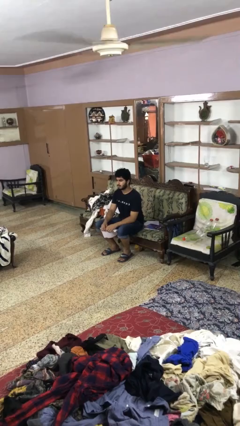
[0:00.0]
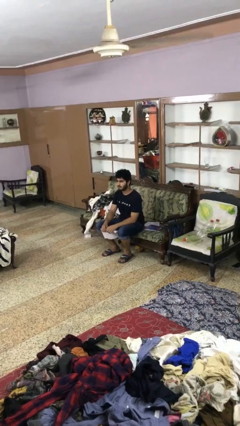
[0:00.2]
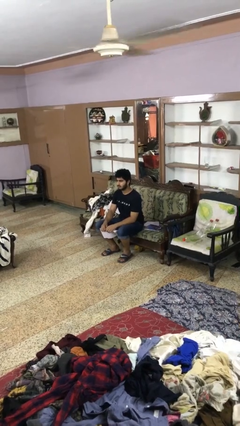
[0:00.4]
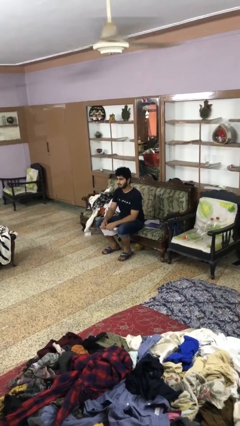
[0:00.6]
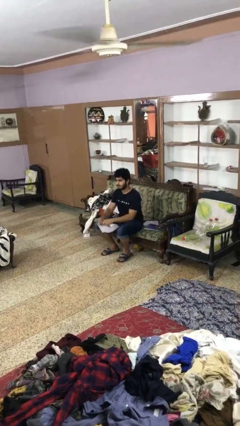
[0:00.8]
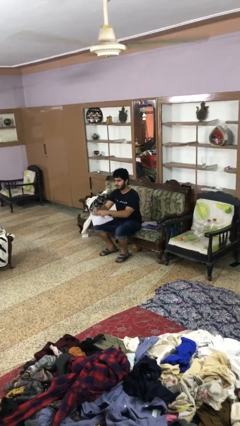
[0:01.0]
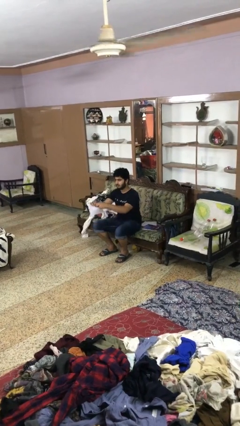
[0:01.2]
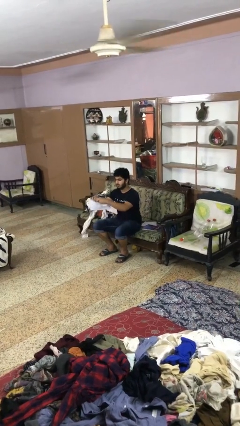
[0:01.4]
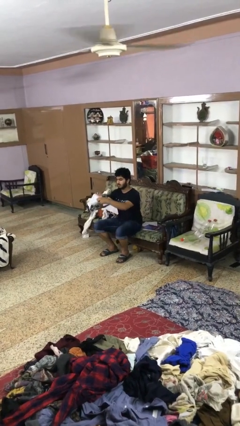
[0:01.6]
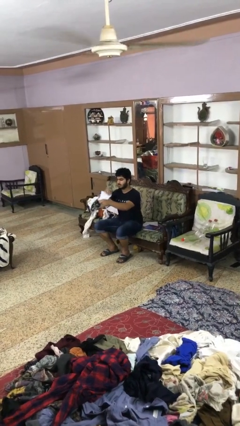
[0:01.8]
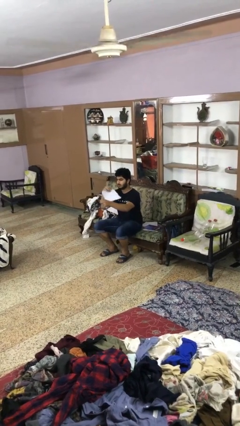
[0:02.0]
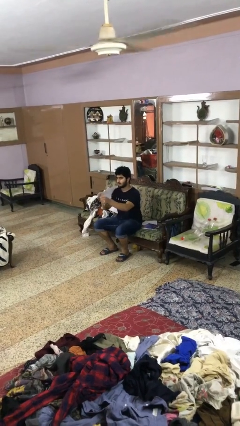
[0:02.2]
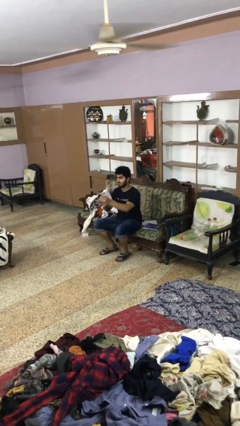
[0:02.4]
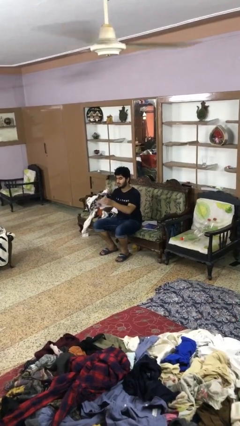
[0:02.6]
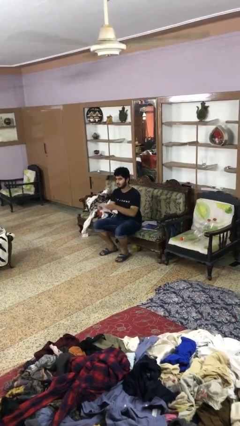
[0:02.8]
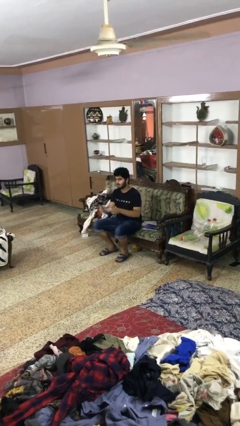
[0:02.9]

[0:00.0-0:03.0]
person tears paper

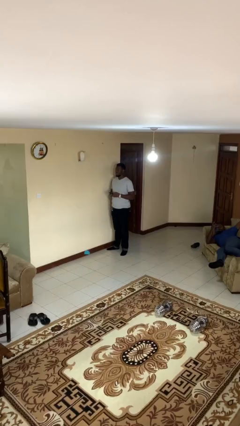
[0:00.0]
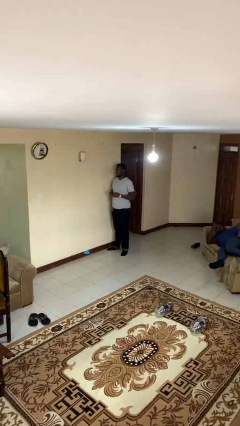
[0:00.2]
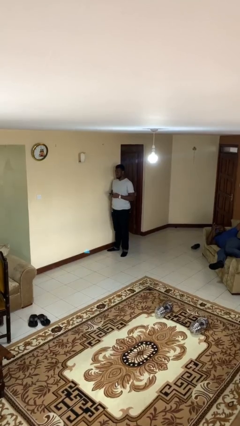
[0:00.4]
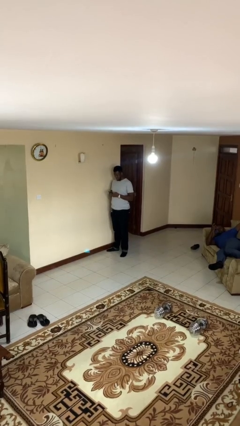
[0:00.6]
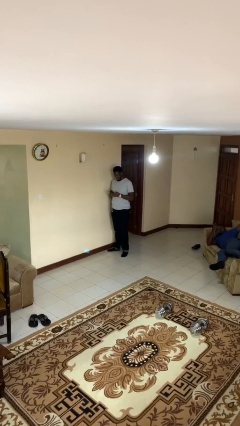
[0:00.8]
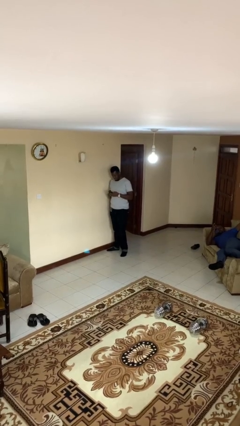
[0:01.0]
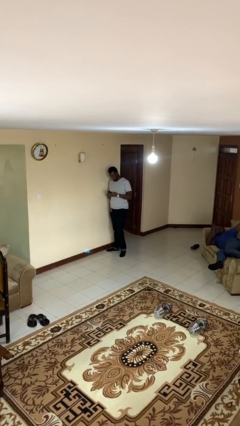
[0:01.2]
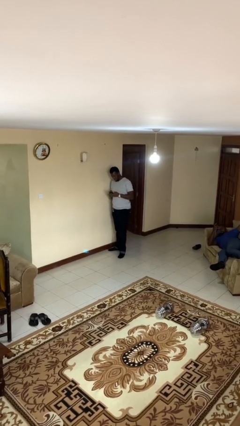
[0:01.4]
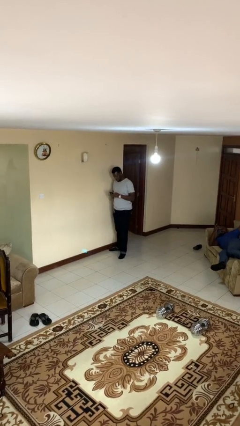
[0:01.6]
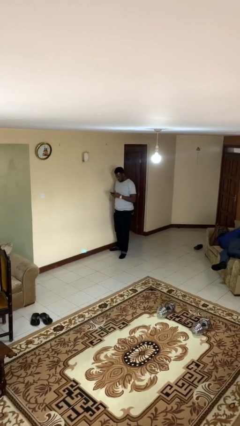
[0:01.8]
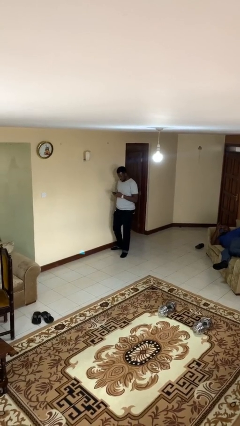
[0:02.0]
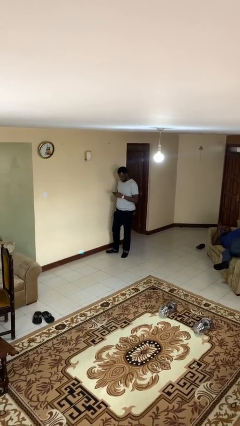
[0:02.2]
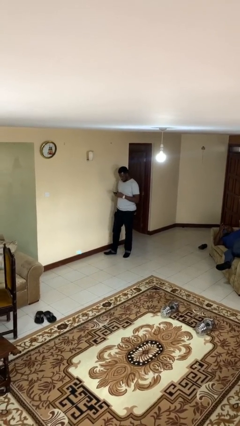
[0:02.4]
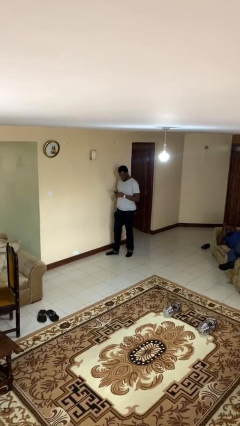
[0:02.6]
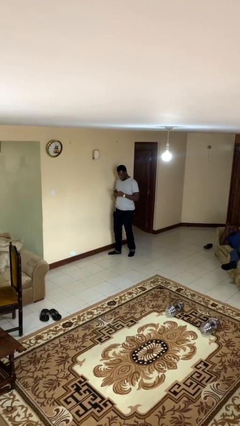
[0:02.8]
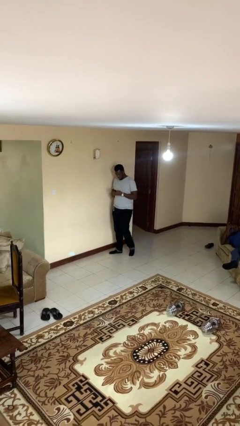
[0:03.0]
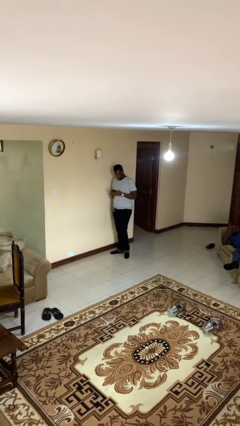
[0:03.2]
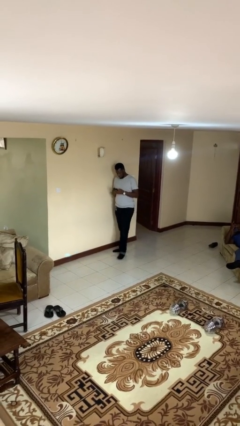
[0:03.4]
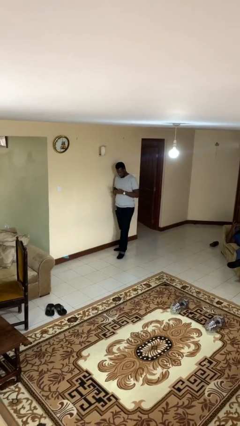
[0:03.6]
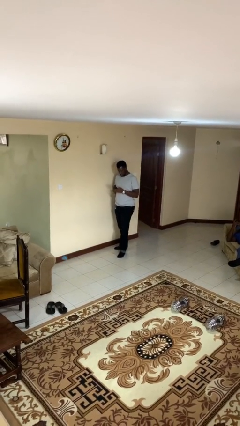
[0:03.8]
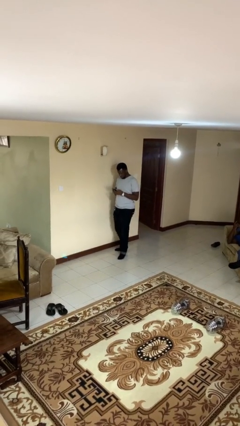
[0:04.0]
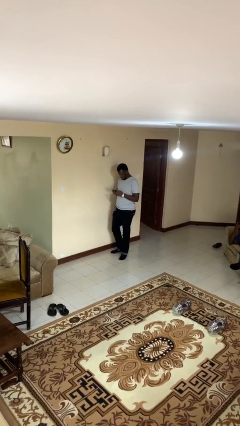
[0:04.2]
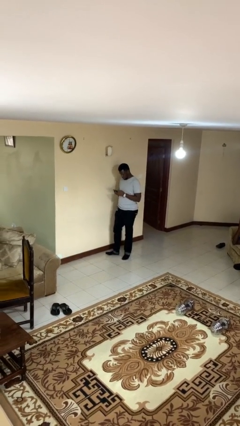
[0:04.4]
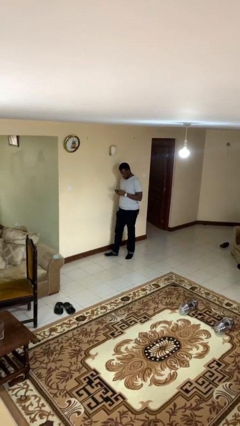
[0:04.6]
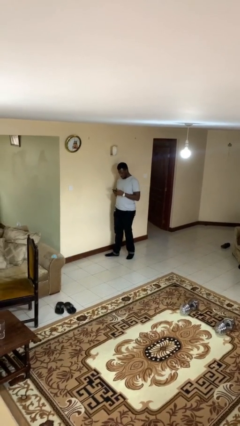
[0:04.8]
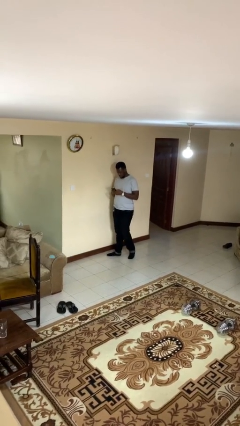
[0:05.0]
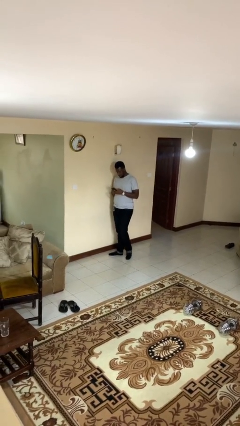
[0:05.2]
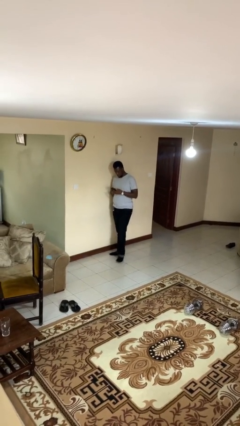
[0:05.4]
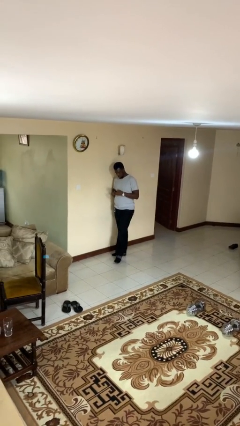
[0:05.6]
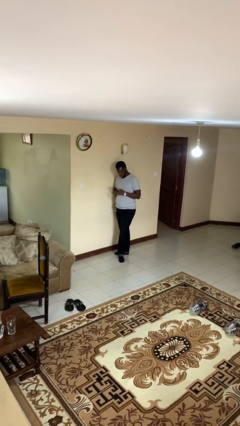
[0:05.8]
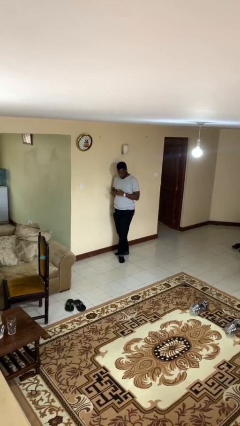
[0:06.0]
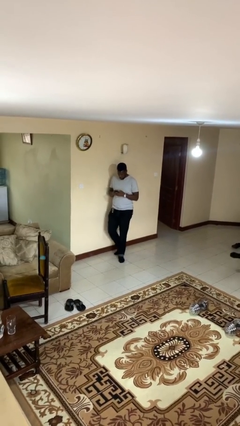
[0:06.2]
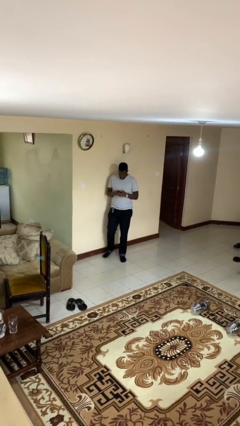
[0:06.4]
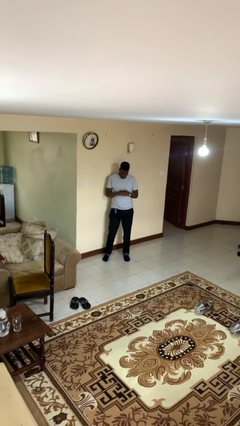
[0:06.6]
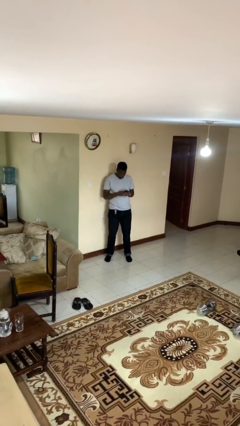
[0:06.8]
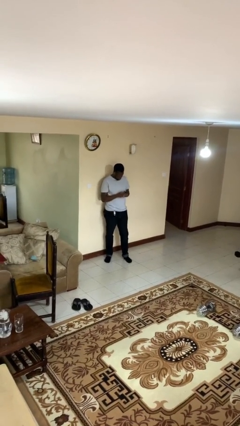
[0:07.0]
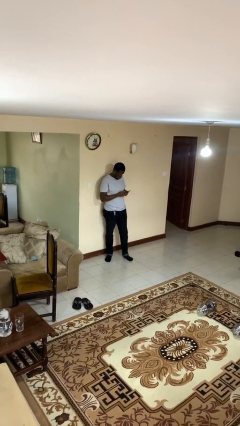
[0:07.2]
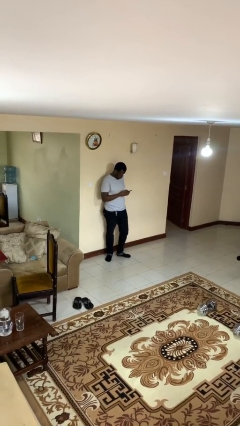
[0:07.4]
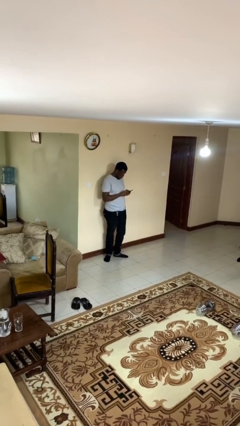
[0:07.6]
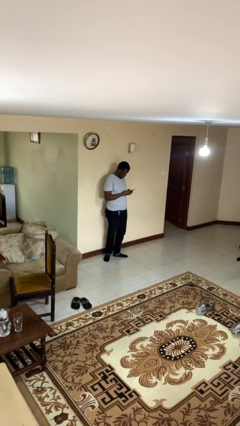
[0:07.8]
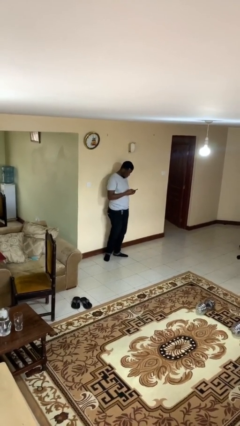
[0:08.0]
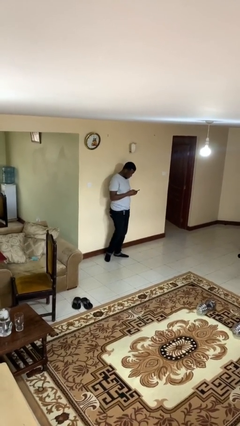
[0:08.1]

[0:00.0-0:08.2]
person texts on phone

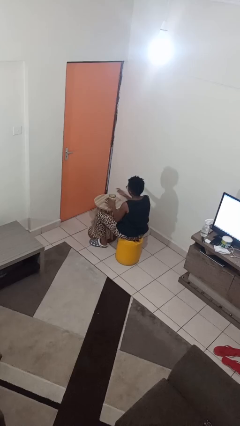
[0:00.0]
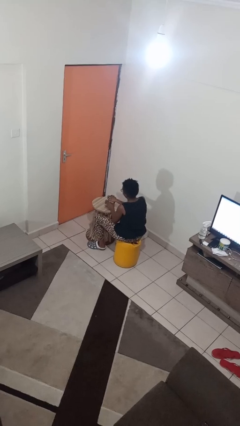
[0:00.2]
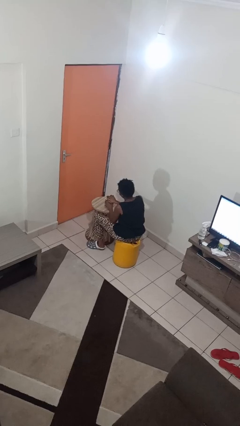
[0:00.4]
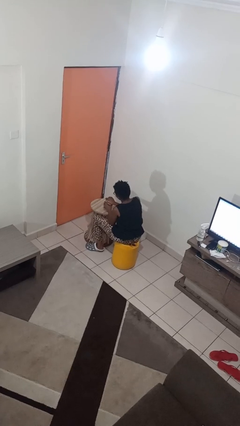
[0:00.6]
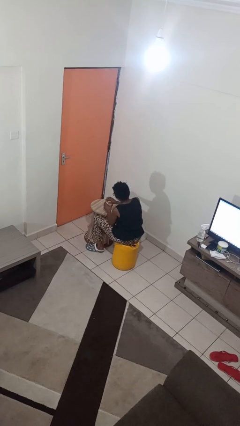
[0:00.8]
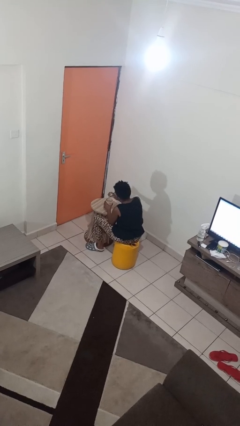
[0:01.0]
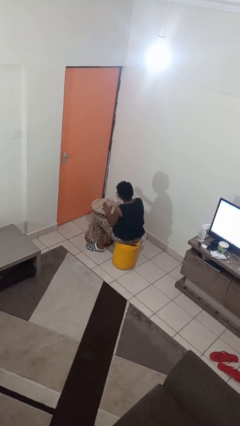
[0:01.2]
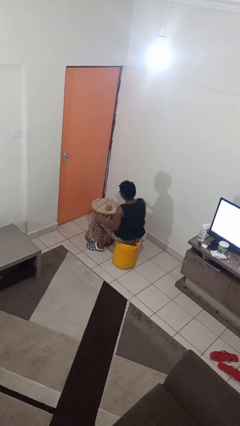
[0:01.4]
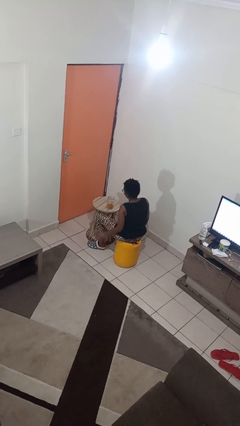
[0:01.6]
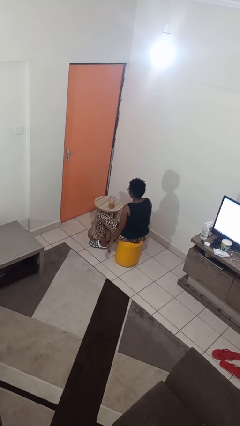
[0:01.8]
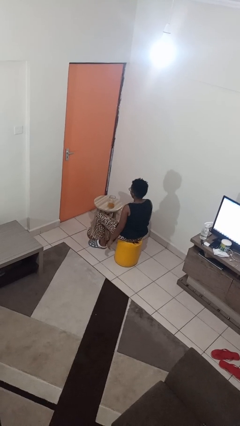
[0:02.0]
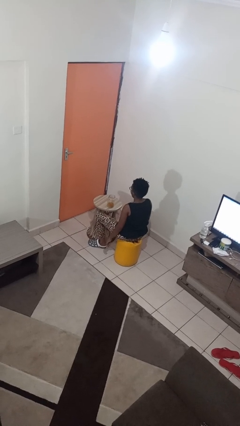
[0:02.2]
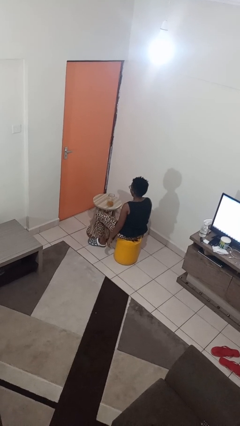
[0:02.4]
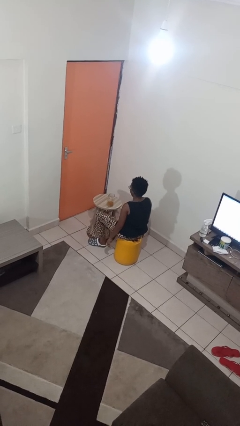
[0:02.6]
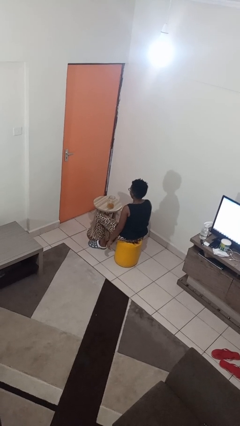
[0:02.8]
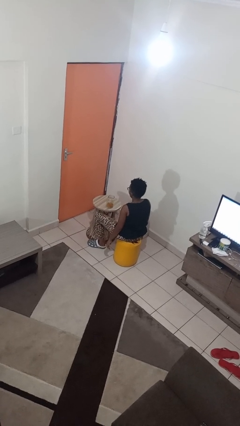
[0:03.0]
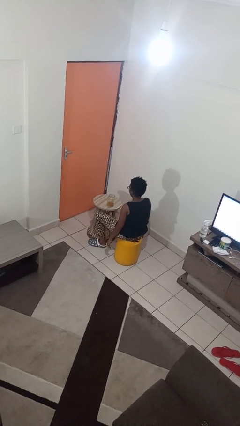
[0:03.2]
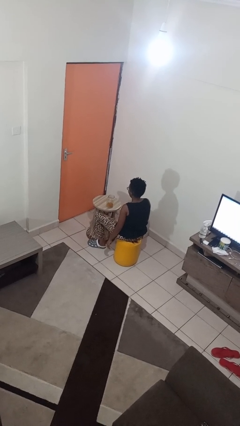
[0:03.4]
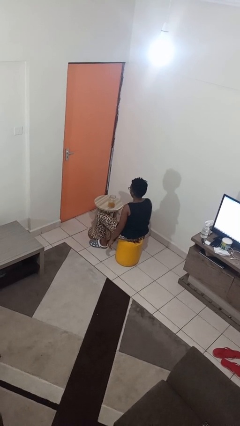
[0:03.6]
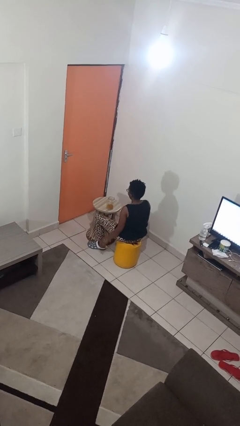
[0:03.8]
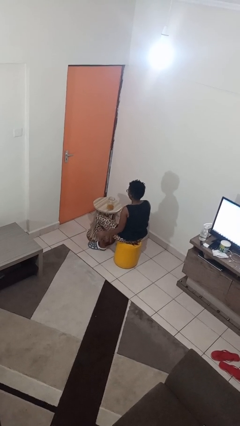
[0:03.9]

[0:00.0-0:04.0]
person opens jar

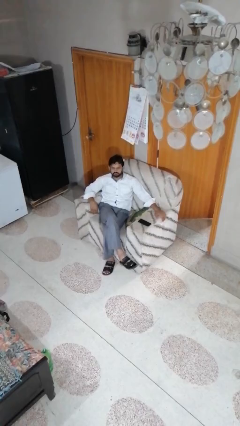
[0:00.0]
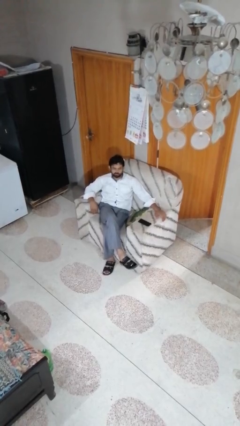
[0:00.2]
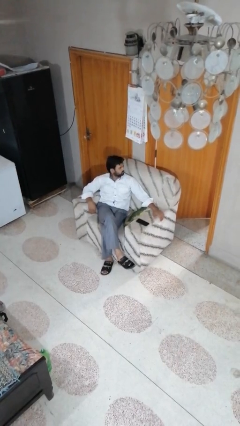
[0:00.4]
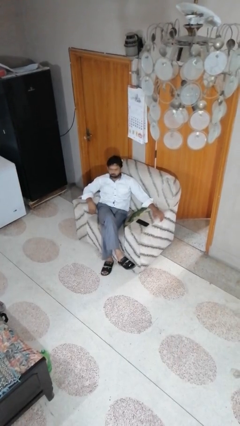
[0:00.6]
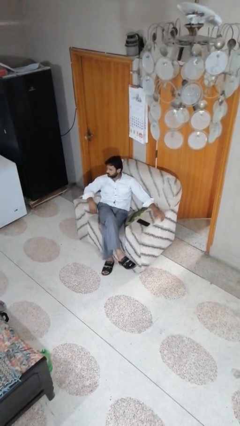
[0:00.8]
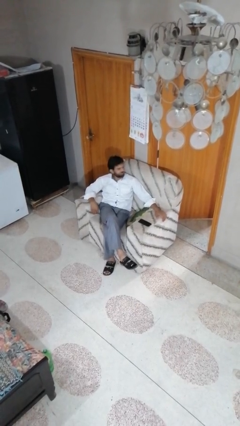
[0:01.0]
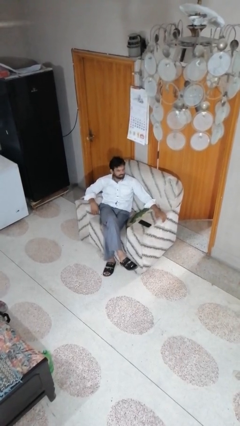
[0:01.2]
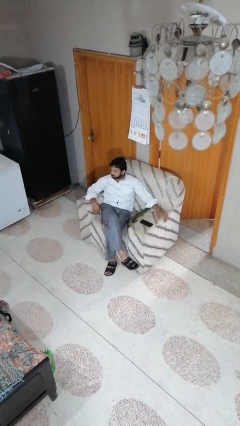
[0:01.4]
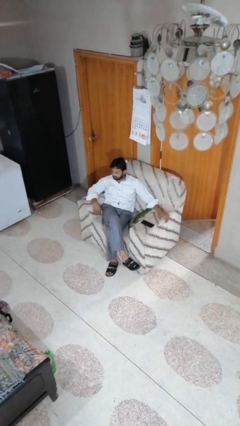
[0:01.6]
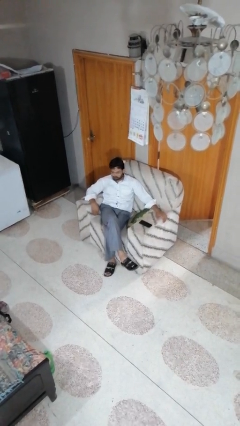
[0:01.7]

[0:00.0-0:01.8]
person shakes head

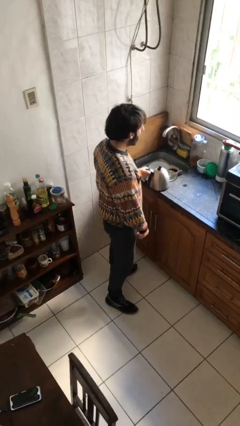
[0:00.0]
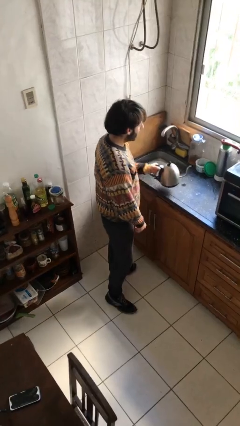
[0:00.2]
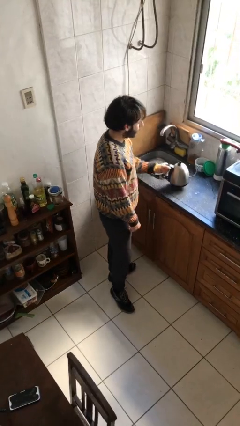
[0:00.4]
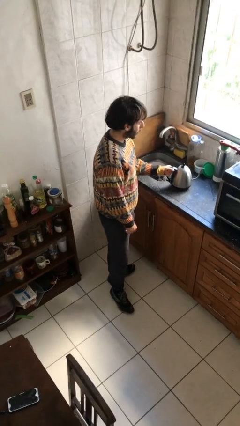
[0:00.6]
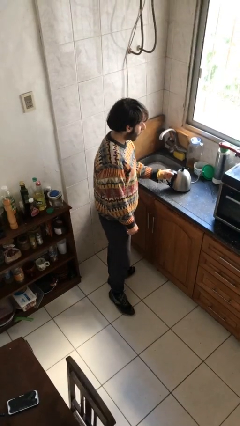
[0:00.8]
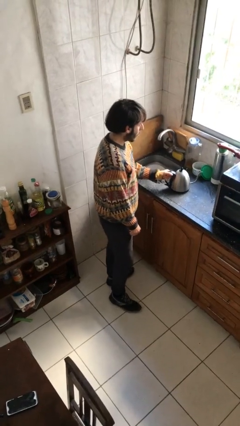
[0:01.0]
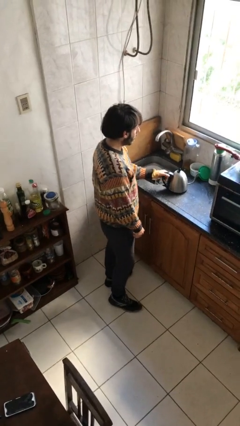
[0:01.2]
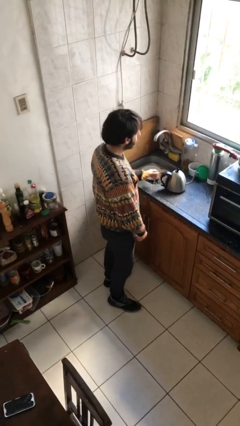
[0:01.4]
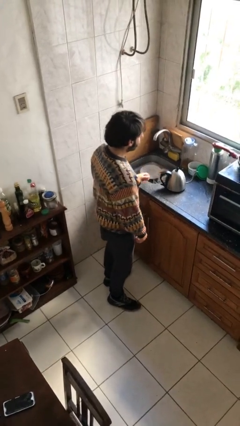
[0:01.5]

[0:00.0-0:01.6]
person puts down object on countertop
